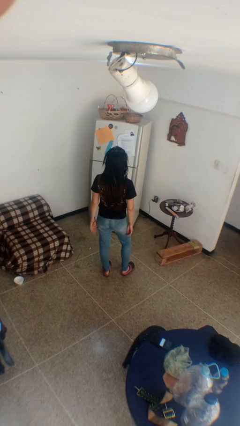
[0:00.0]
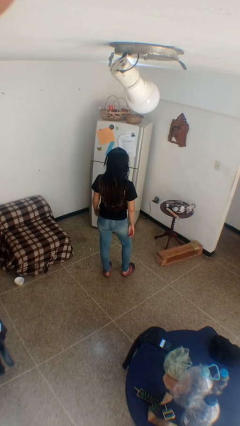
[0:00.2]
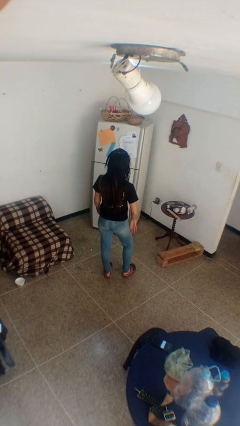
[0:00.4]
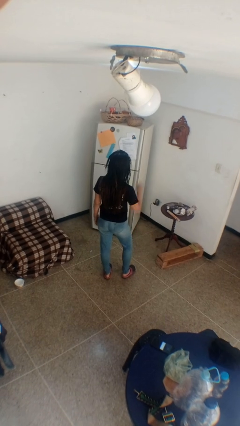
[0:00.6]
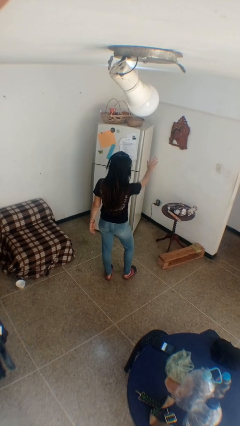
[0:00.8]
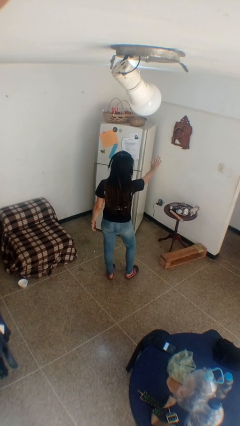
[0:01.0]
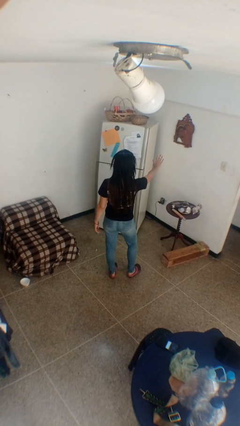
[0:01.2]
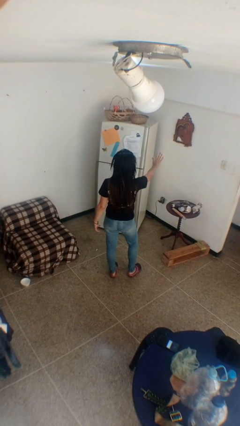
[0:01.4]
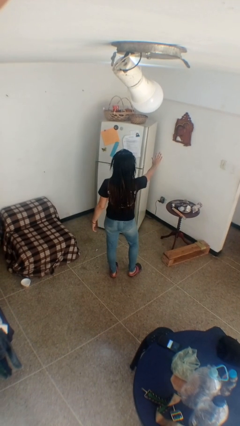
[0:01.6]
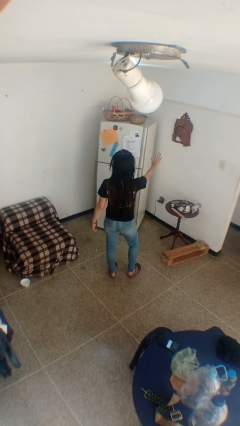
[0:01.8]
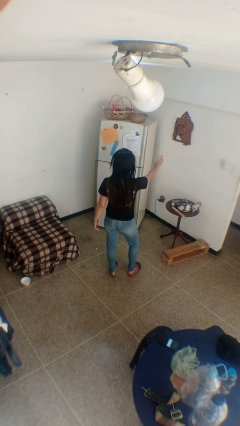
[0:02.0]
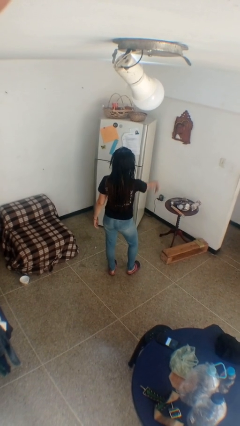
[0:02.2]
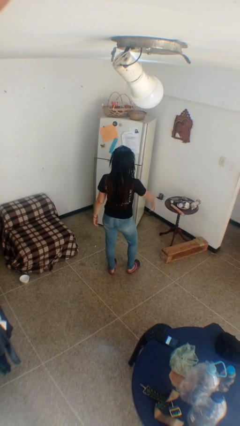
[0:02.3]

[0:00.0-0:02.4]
person gestures stop

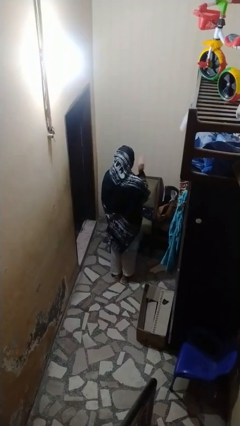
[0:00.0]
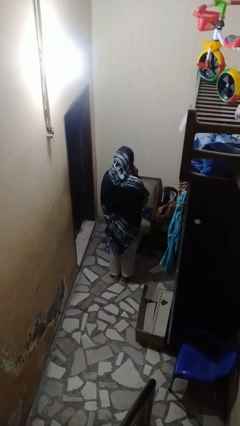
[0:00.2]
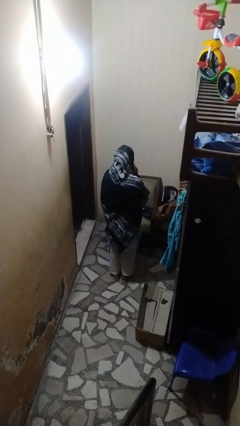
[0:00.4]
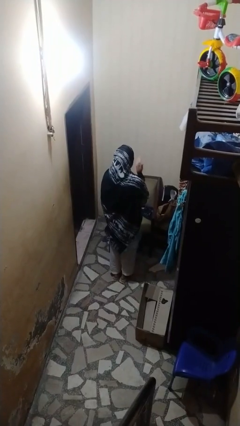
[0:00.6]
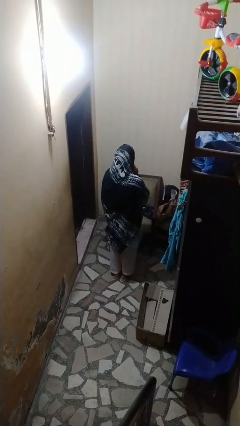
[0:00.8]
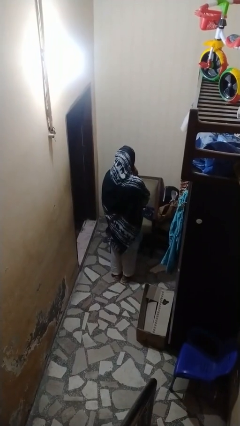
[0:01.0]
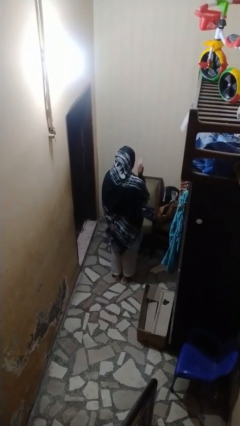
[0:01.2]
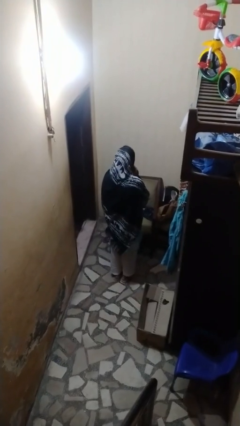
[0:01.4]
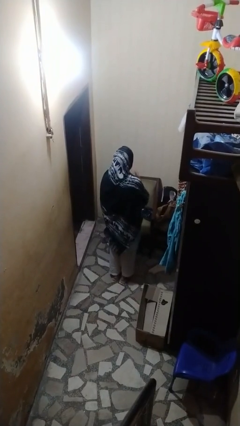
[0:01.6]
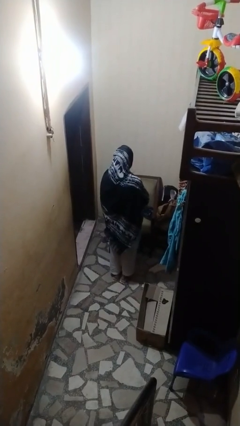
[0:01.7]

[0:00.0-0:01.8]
person gestures blow kiss

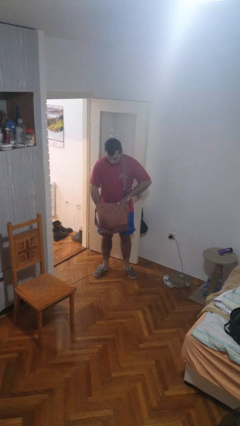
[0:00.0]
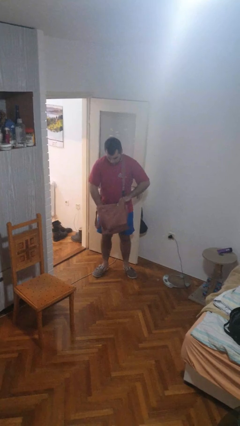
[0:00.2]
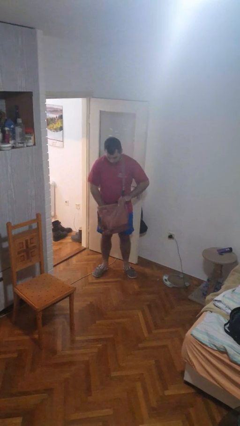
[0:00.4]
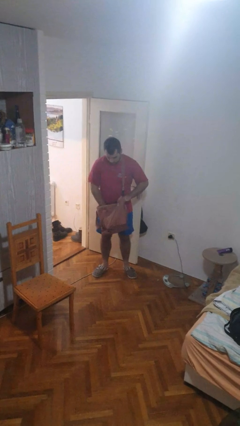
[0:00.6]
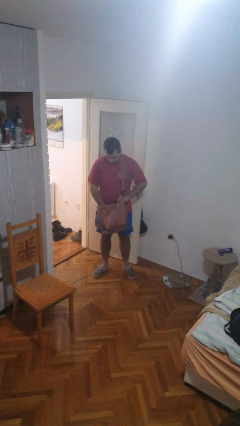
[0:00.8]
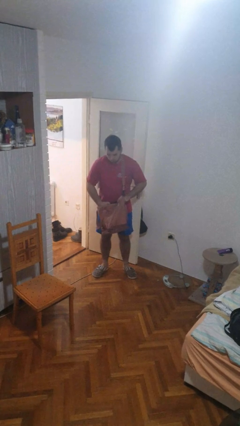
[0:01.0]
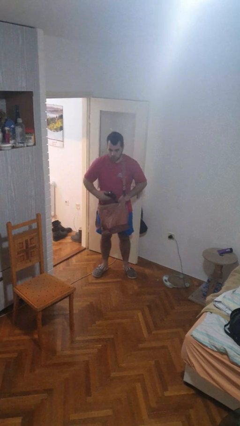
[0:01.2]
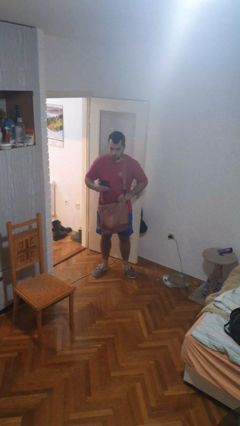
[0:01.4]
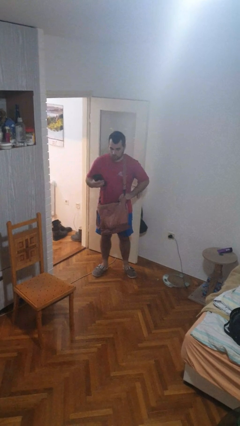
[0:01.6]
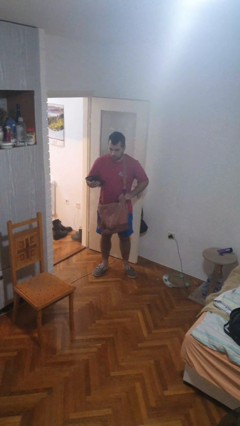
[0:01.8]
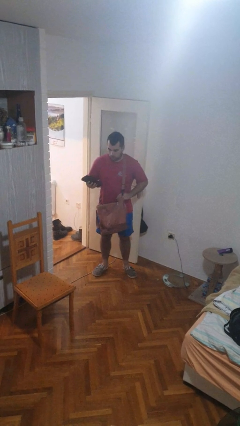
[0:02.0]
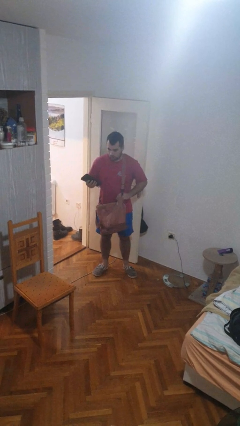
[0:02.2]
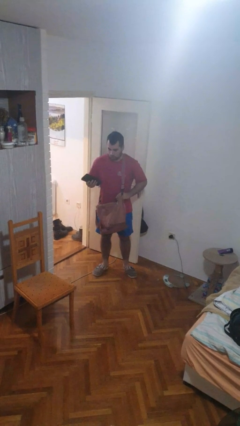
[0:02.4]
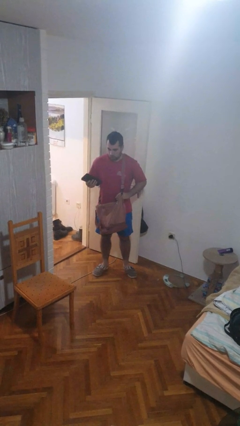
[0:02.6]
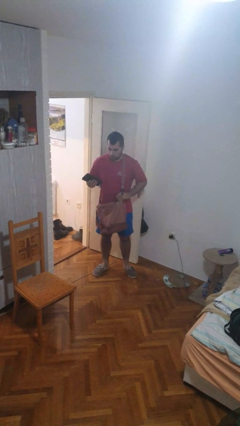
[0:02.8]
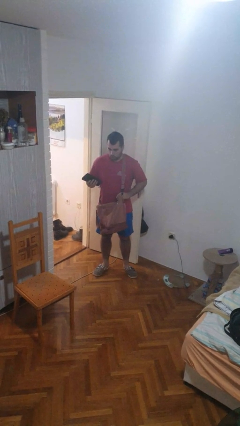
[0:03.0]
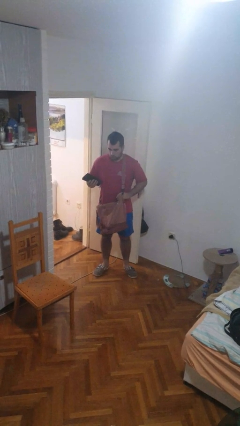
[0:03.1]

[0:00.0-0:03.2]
person takes object from purse

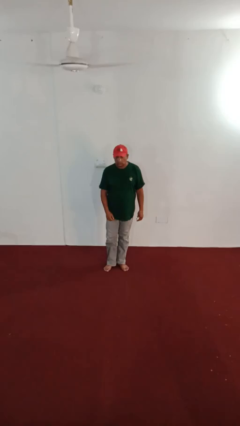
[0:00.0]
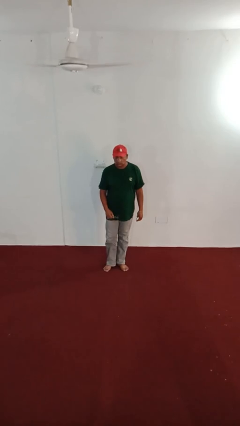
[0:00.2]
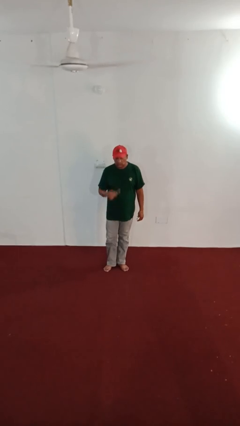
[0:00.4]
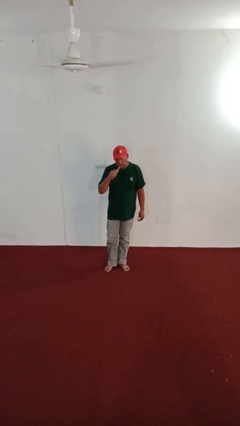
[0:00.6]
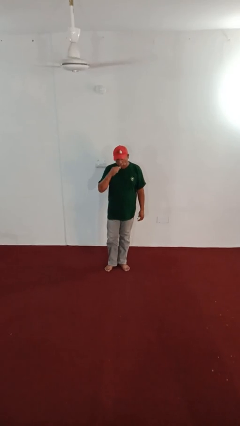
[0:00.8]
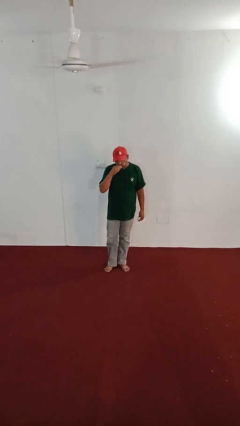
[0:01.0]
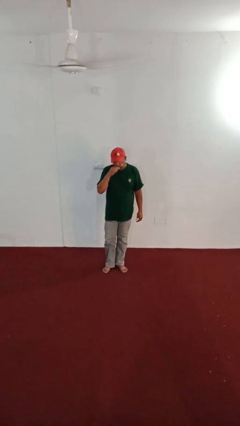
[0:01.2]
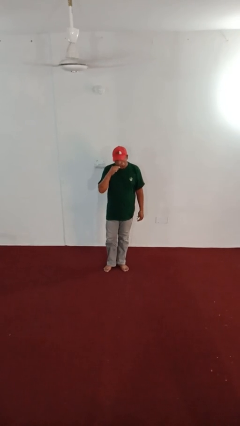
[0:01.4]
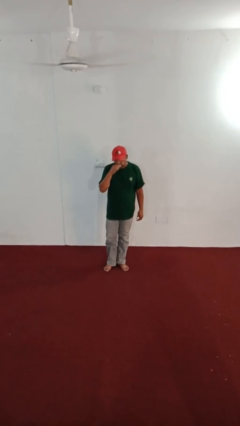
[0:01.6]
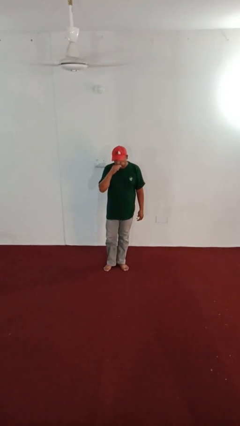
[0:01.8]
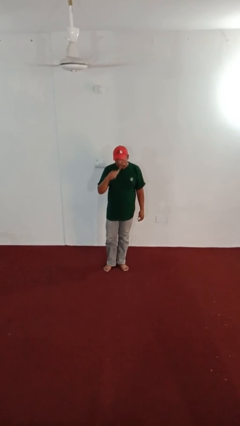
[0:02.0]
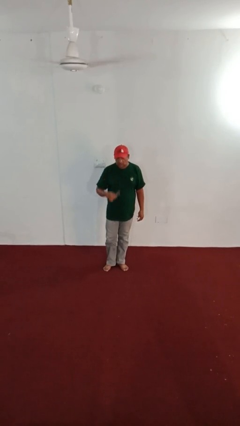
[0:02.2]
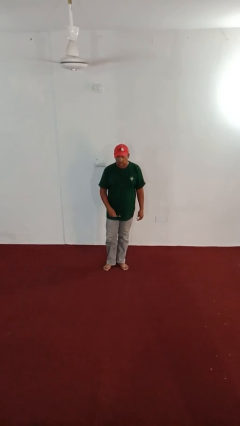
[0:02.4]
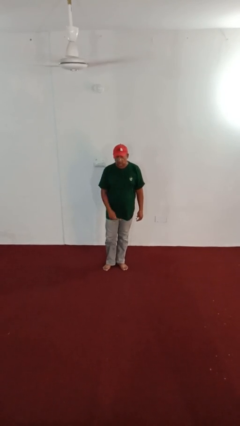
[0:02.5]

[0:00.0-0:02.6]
person brushes teeth

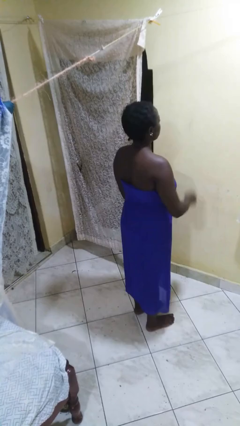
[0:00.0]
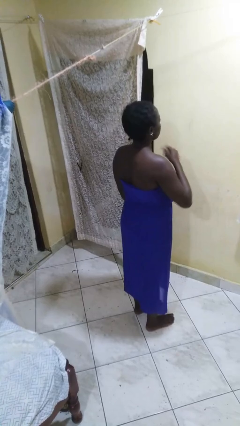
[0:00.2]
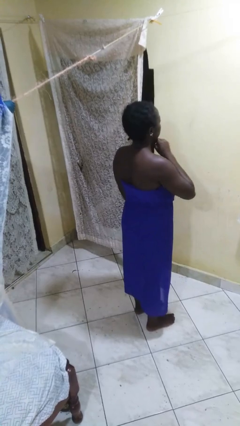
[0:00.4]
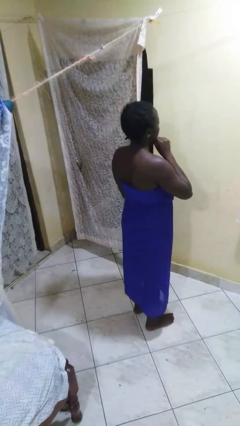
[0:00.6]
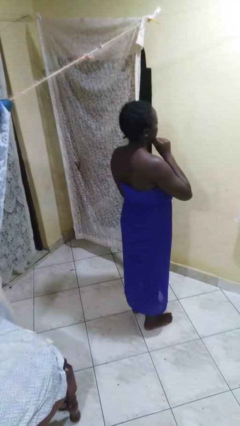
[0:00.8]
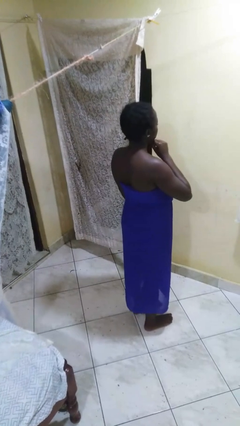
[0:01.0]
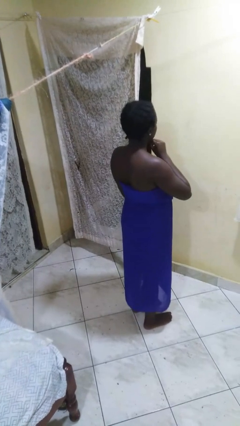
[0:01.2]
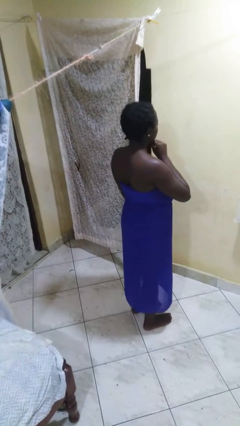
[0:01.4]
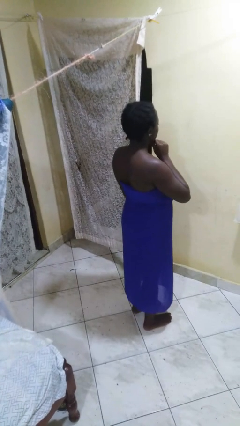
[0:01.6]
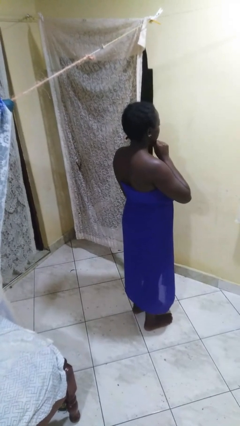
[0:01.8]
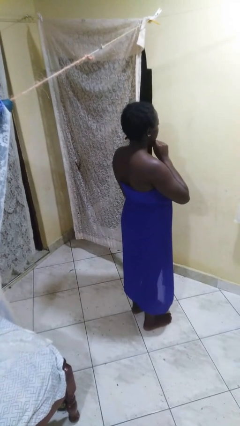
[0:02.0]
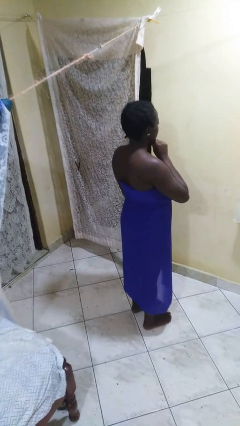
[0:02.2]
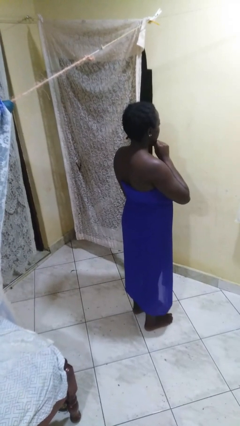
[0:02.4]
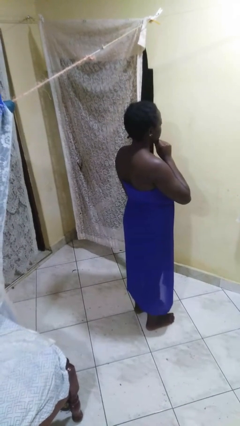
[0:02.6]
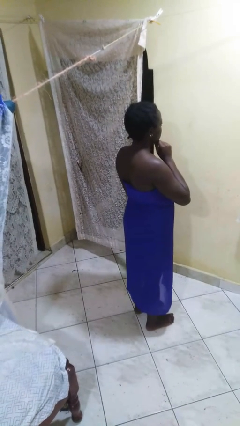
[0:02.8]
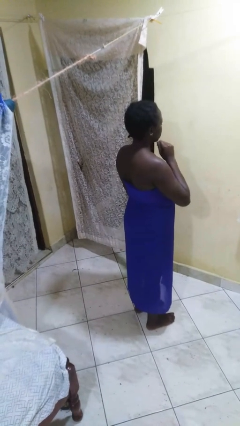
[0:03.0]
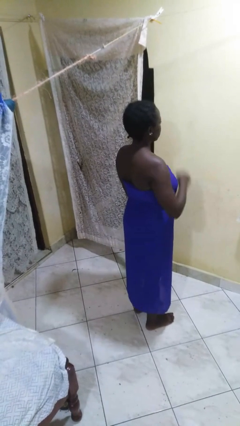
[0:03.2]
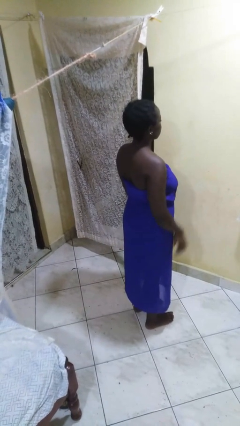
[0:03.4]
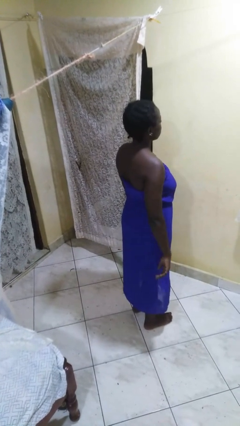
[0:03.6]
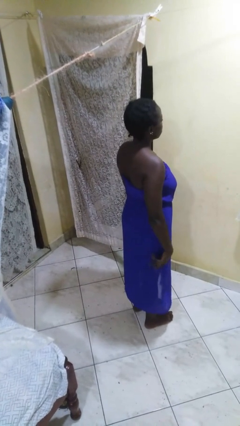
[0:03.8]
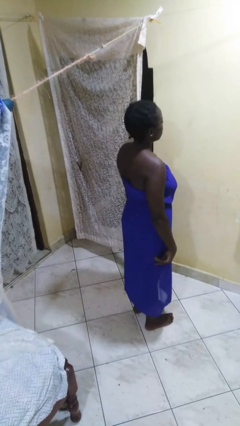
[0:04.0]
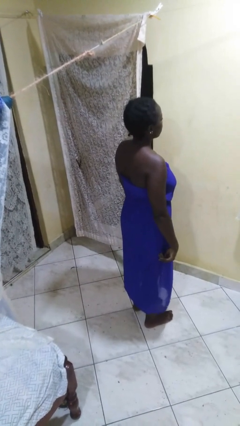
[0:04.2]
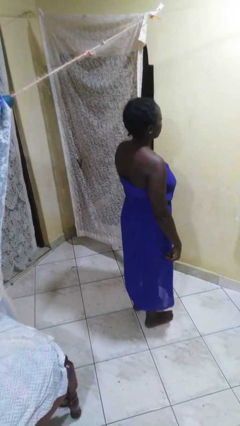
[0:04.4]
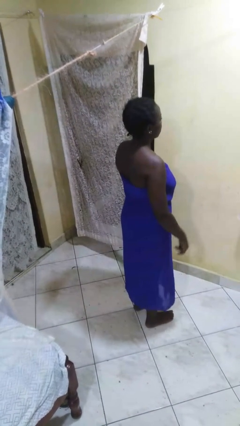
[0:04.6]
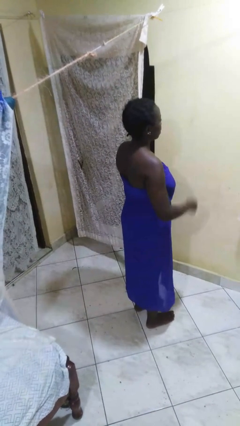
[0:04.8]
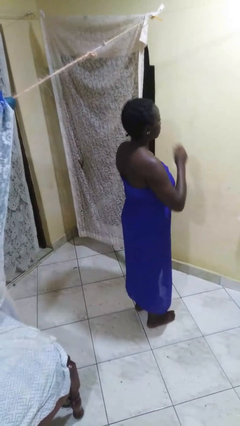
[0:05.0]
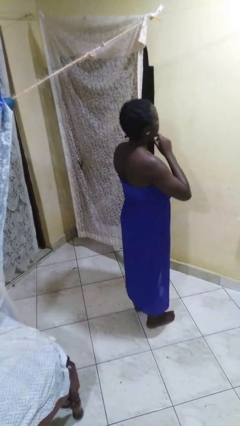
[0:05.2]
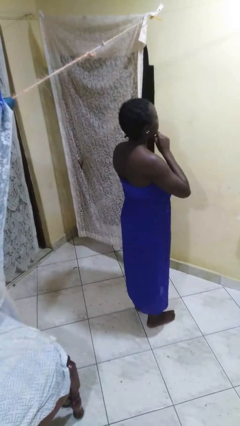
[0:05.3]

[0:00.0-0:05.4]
person strokes chin

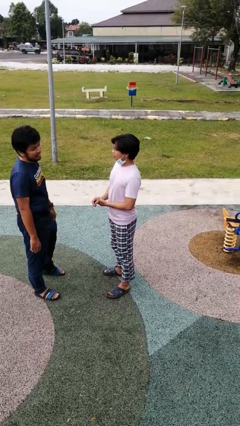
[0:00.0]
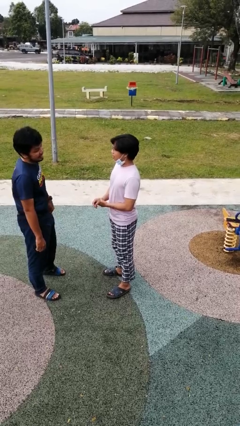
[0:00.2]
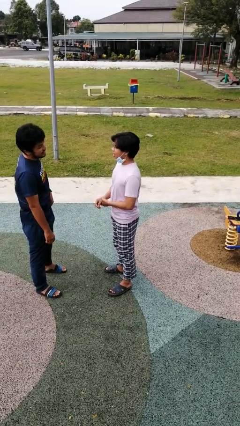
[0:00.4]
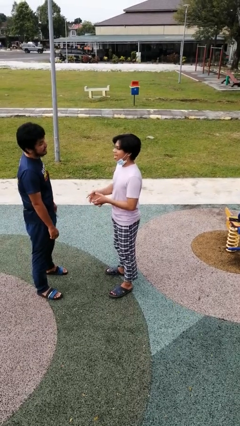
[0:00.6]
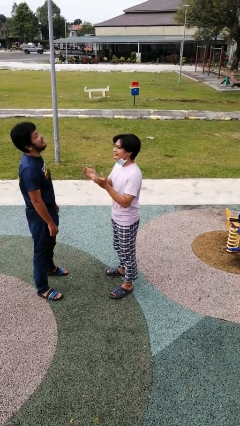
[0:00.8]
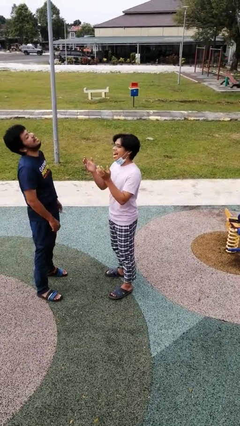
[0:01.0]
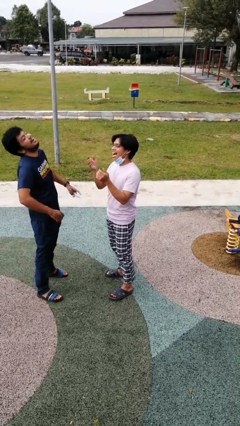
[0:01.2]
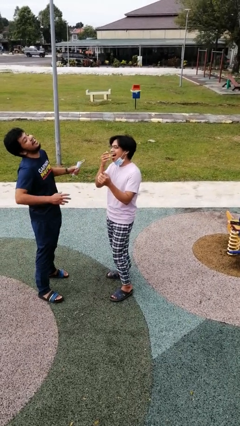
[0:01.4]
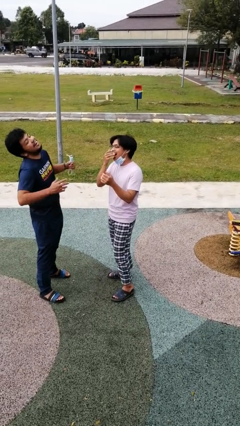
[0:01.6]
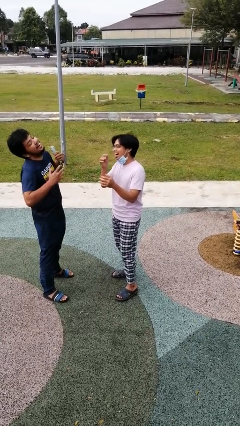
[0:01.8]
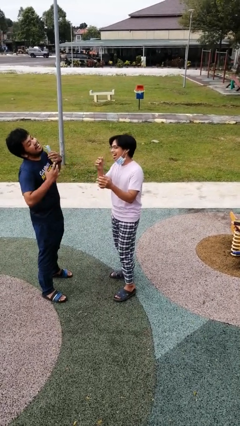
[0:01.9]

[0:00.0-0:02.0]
person laughs with person
